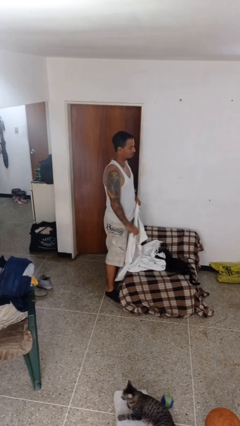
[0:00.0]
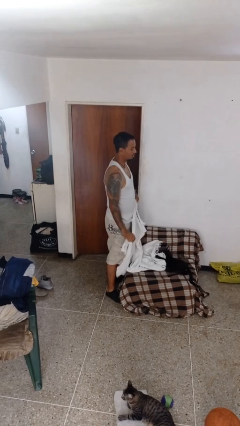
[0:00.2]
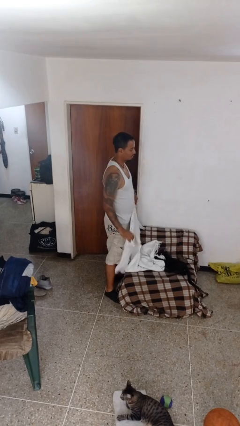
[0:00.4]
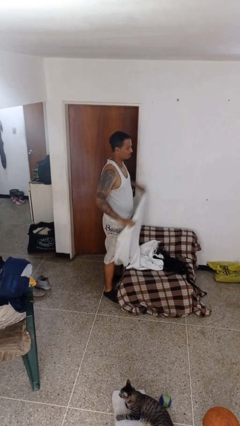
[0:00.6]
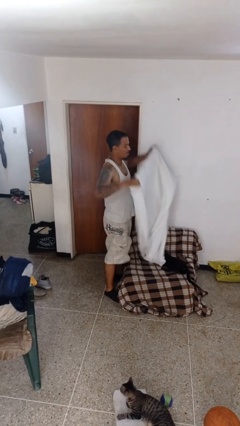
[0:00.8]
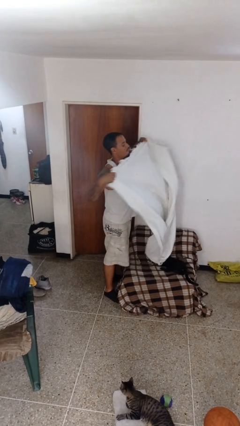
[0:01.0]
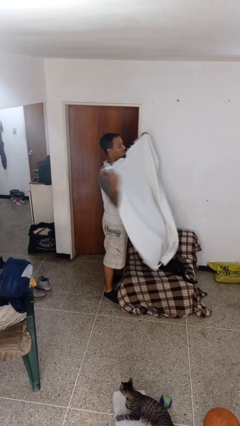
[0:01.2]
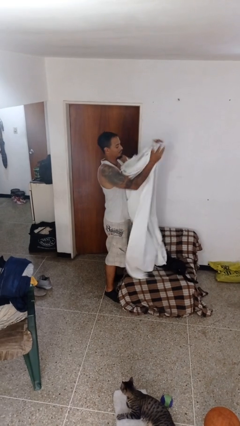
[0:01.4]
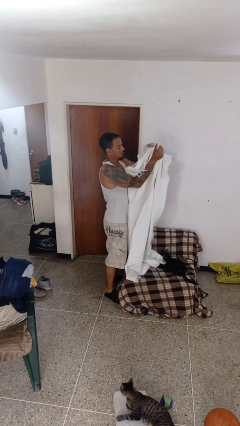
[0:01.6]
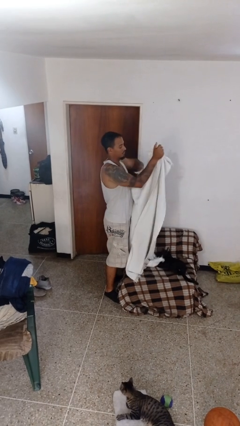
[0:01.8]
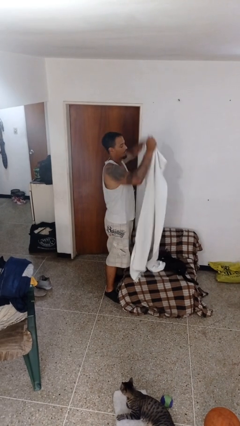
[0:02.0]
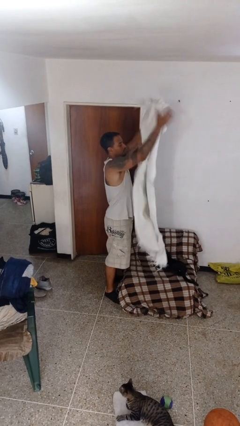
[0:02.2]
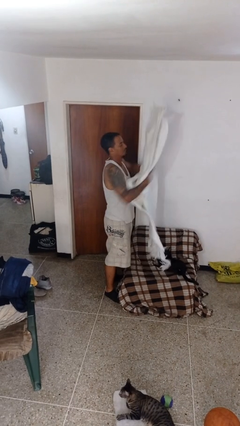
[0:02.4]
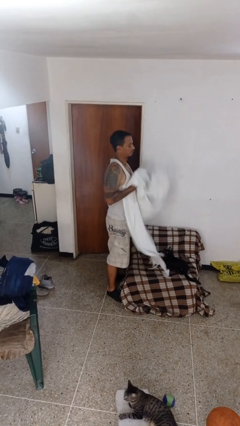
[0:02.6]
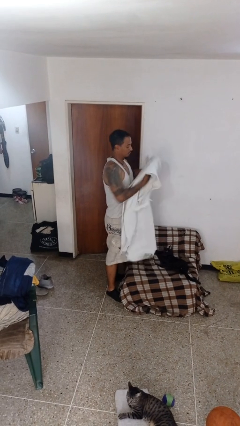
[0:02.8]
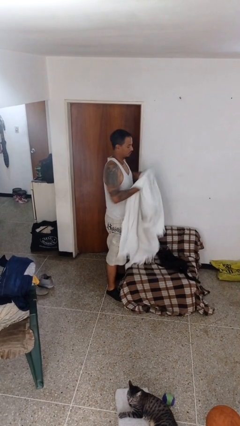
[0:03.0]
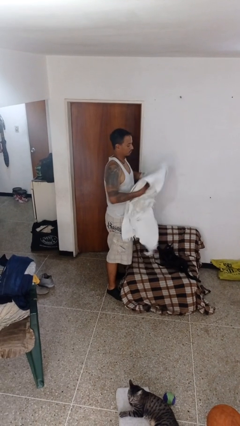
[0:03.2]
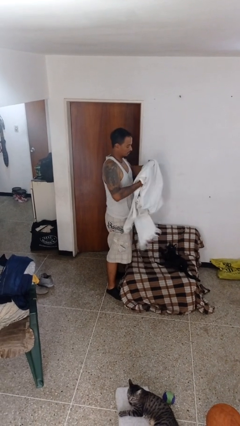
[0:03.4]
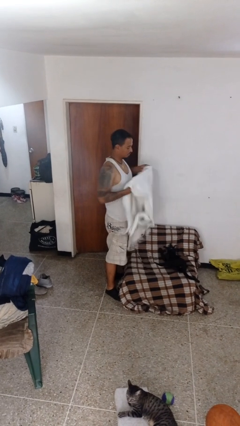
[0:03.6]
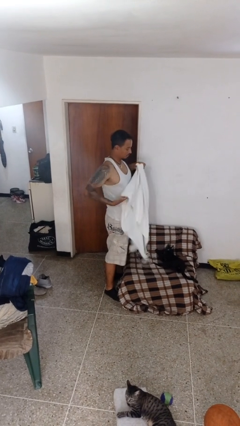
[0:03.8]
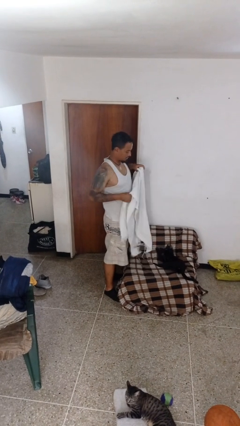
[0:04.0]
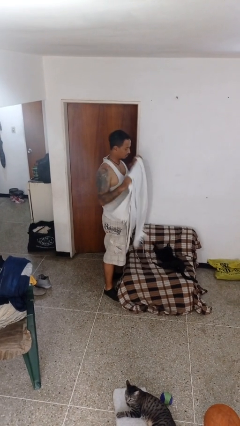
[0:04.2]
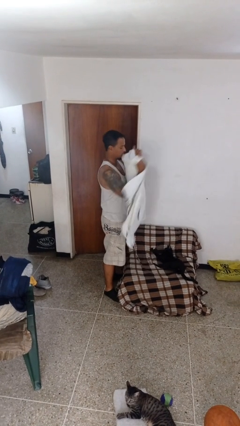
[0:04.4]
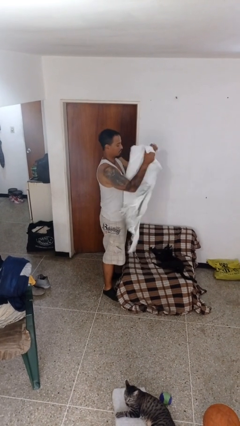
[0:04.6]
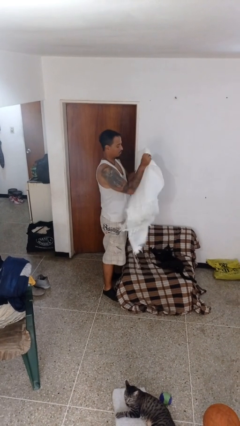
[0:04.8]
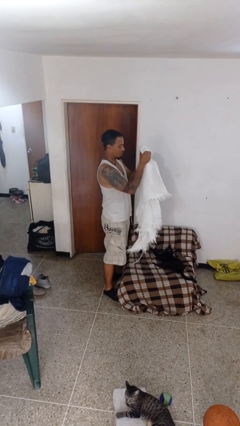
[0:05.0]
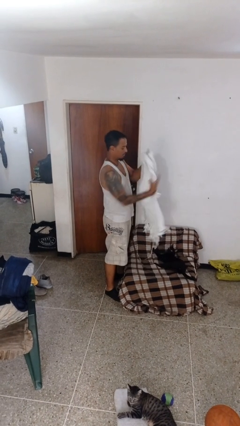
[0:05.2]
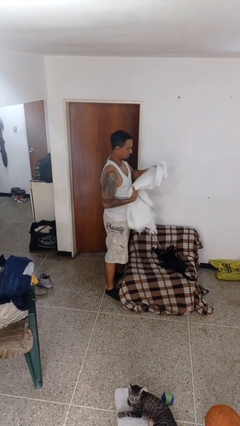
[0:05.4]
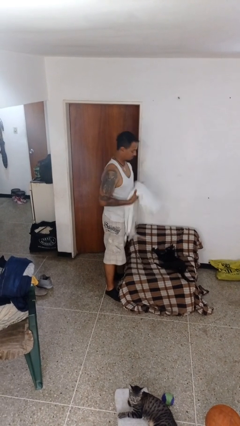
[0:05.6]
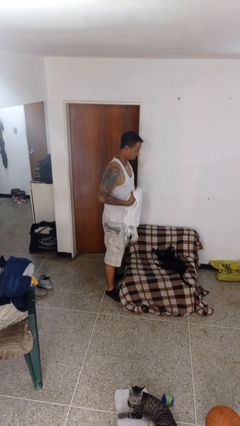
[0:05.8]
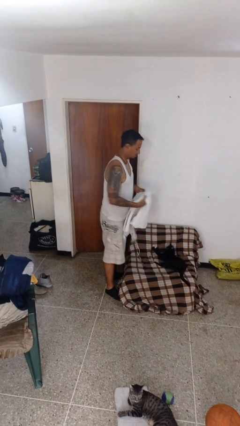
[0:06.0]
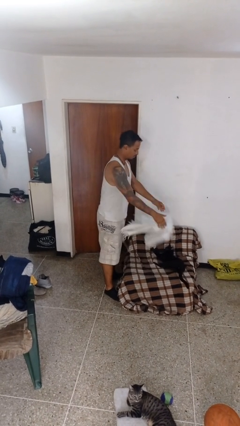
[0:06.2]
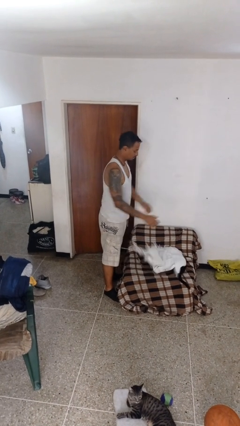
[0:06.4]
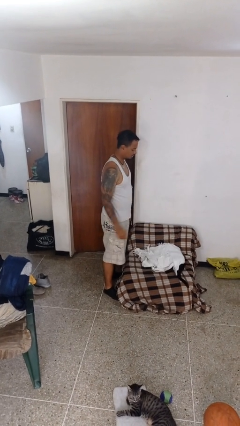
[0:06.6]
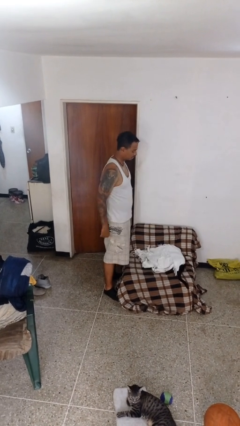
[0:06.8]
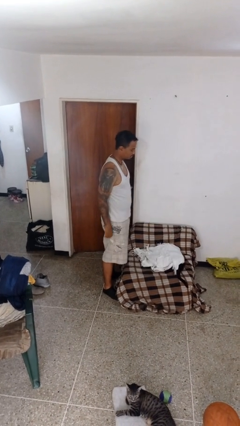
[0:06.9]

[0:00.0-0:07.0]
person folds blanket

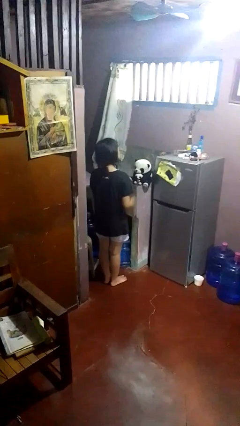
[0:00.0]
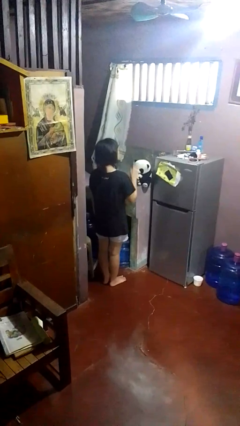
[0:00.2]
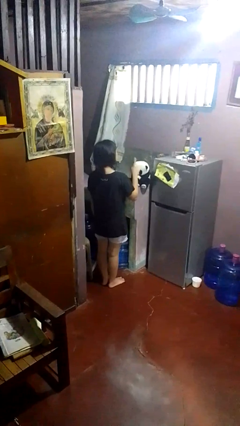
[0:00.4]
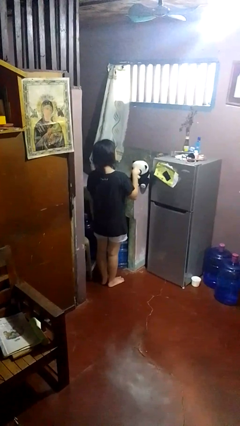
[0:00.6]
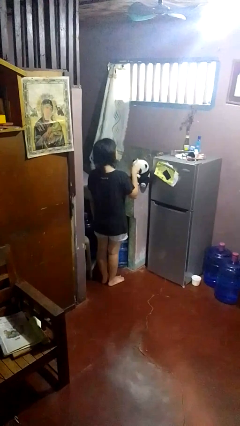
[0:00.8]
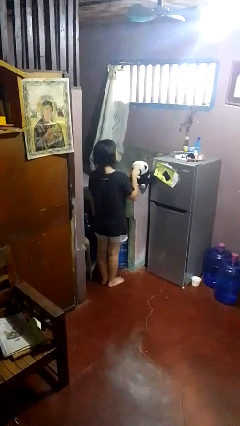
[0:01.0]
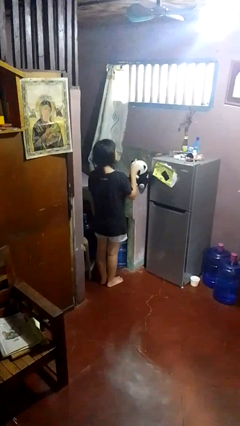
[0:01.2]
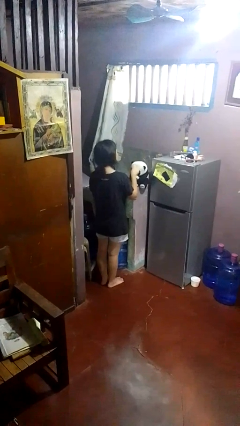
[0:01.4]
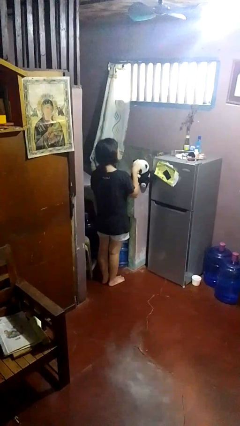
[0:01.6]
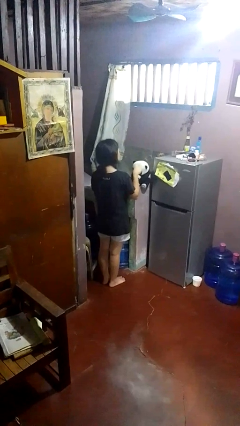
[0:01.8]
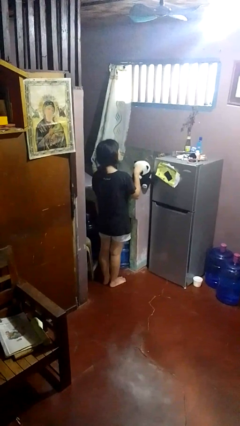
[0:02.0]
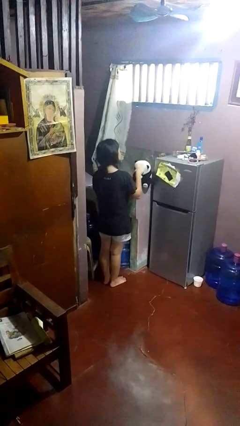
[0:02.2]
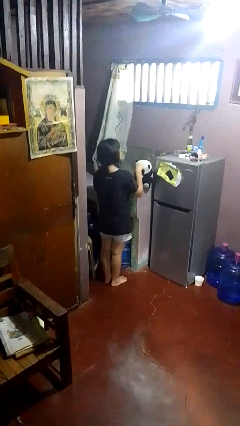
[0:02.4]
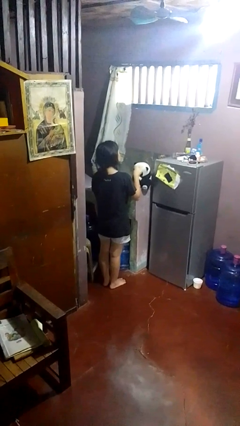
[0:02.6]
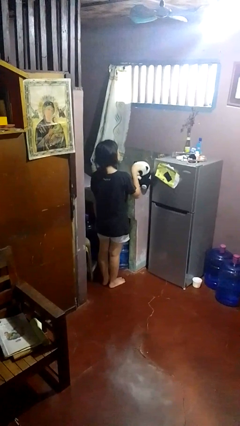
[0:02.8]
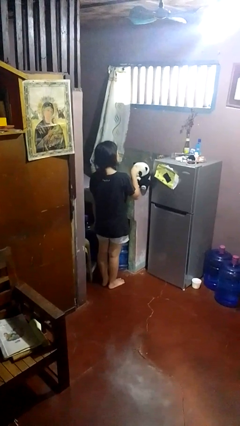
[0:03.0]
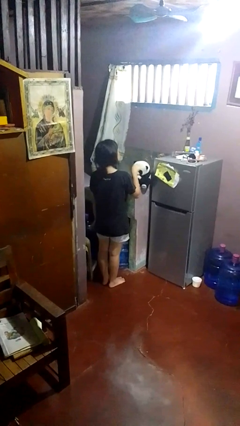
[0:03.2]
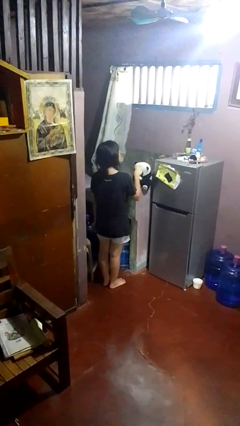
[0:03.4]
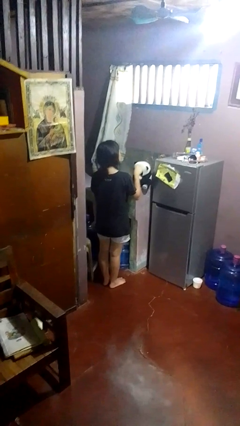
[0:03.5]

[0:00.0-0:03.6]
person taps object with finger

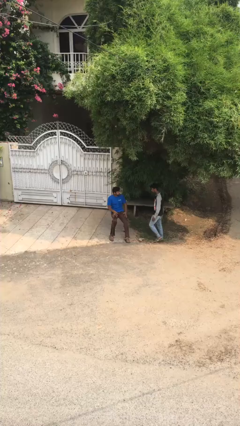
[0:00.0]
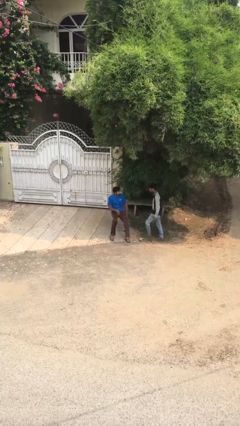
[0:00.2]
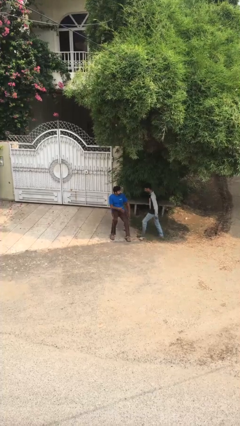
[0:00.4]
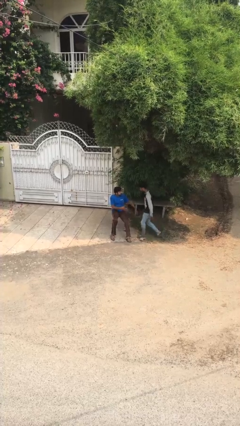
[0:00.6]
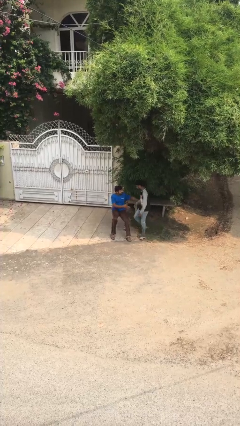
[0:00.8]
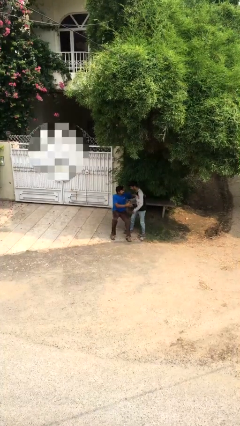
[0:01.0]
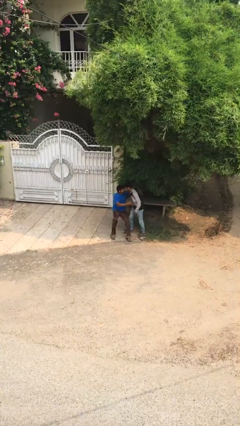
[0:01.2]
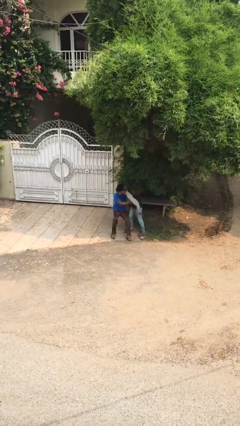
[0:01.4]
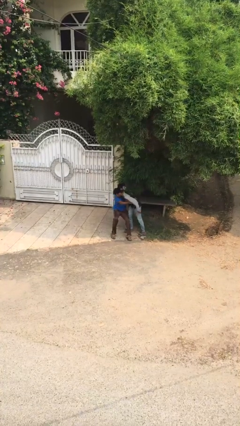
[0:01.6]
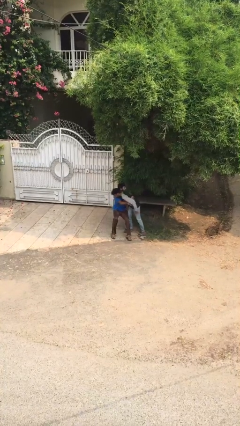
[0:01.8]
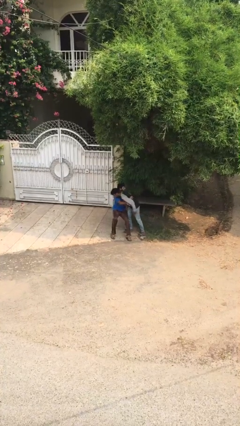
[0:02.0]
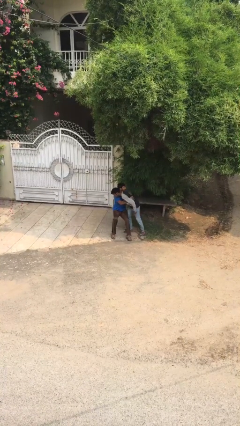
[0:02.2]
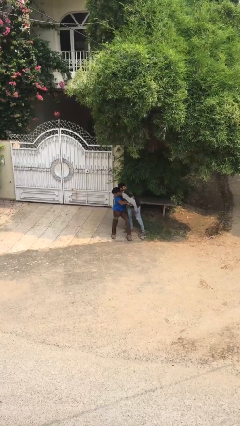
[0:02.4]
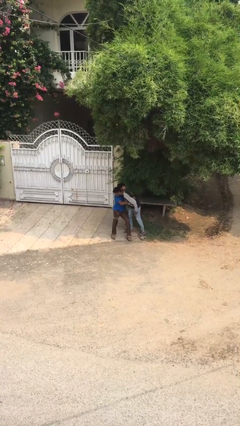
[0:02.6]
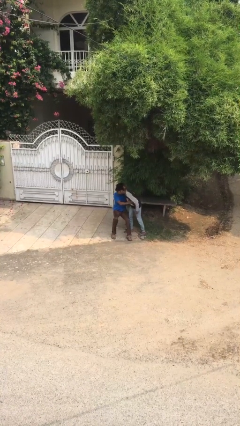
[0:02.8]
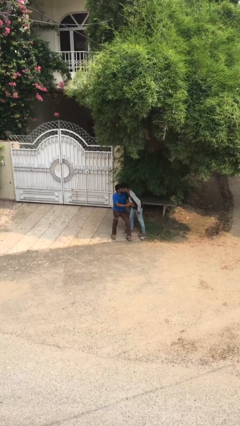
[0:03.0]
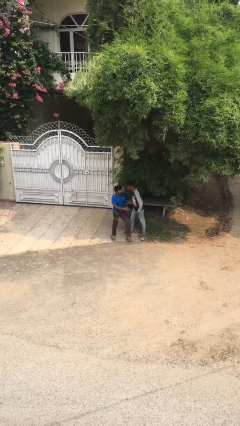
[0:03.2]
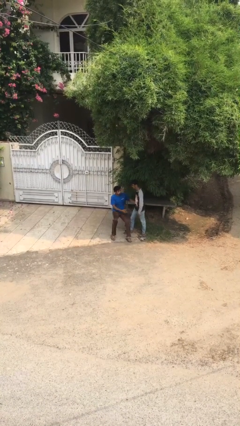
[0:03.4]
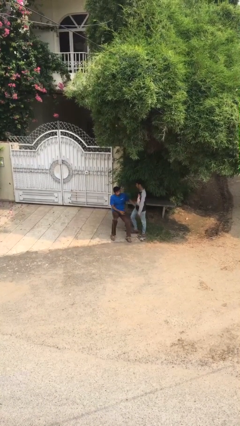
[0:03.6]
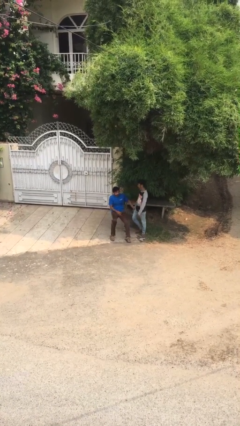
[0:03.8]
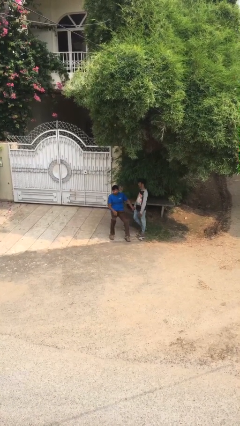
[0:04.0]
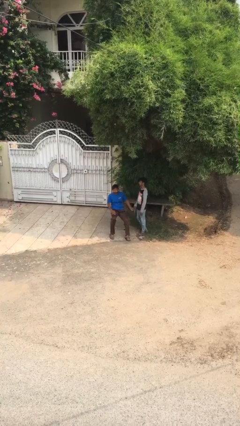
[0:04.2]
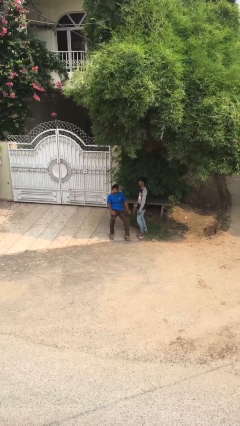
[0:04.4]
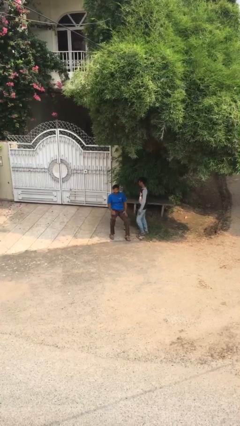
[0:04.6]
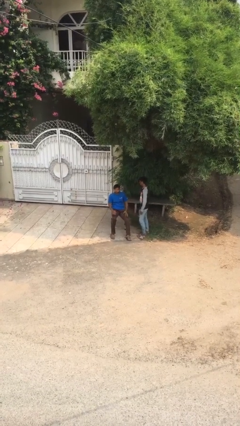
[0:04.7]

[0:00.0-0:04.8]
person embraces person

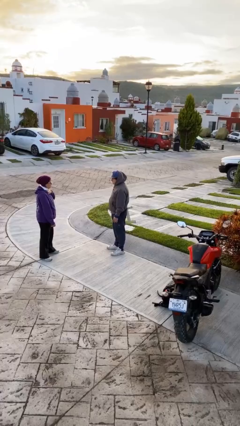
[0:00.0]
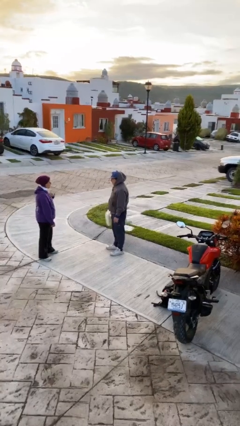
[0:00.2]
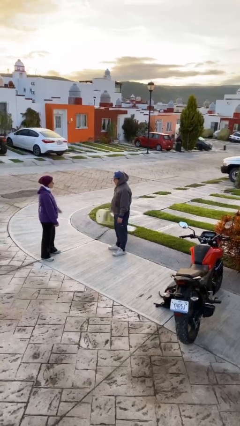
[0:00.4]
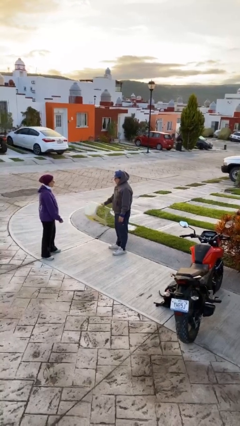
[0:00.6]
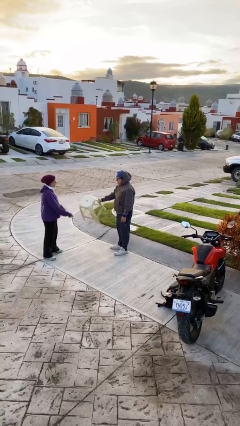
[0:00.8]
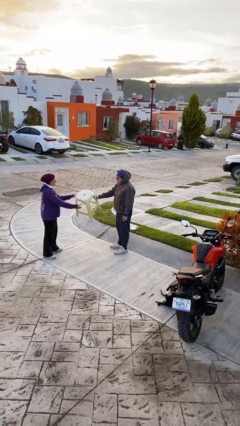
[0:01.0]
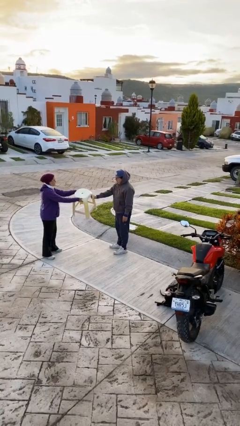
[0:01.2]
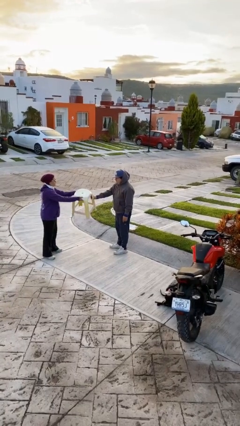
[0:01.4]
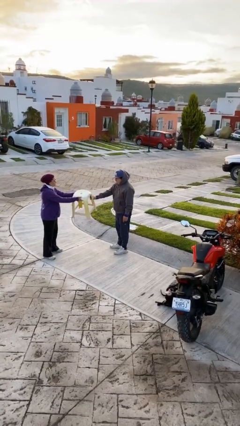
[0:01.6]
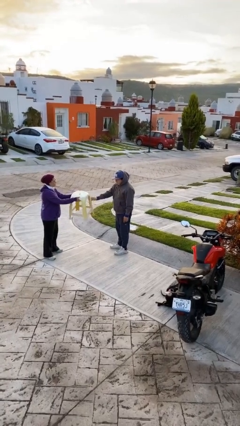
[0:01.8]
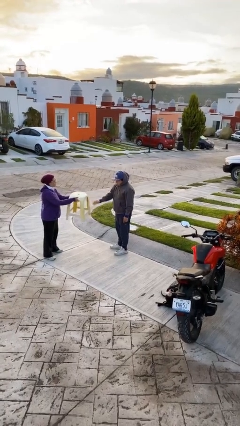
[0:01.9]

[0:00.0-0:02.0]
person transfers object to person

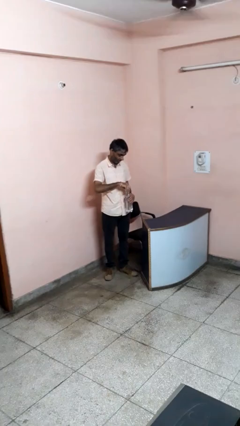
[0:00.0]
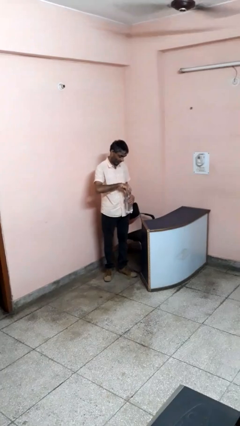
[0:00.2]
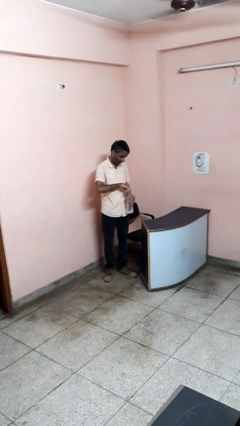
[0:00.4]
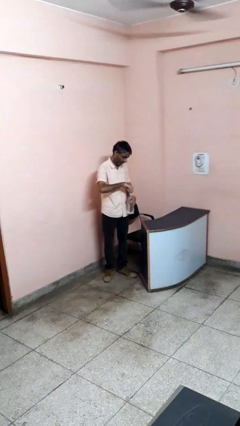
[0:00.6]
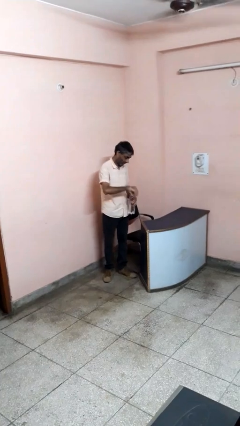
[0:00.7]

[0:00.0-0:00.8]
person unscrews lid from bottle
